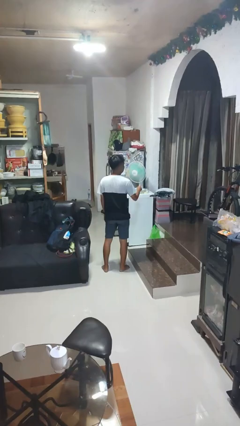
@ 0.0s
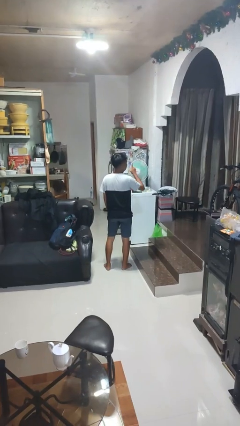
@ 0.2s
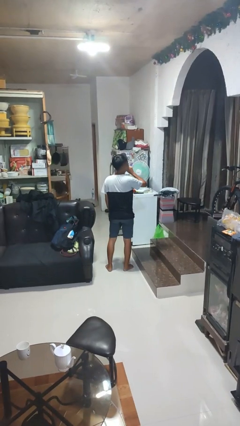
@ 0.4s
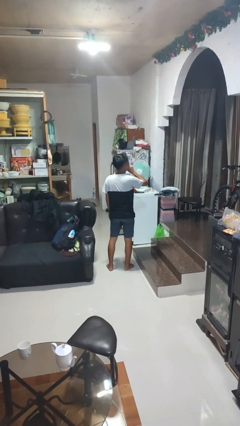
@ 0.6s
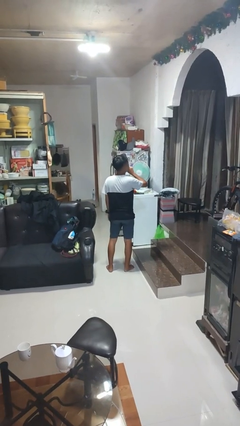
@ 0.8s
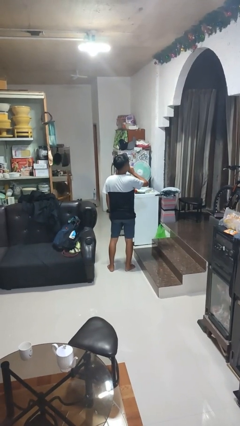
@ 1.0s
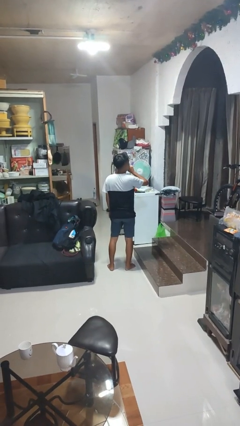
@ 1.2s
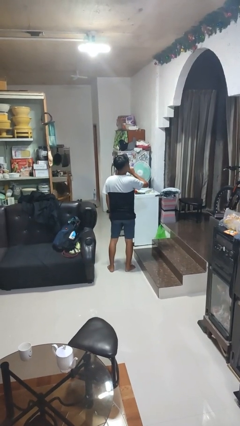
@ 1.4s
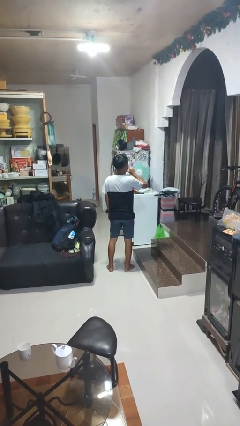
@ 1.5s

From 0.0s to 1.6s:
person gestures be quiet

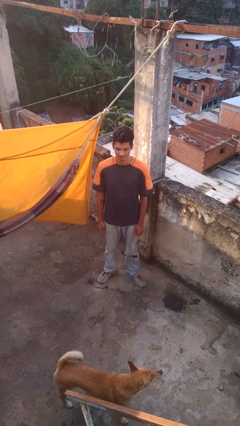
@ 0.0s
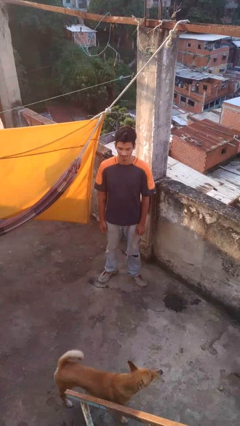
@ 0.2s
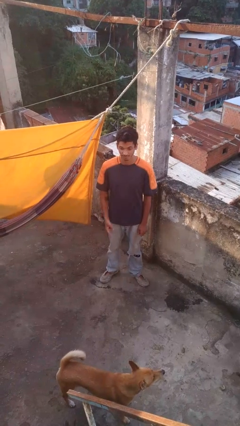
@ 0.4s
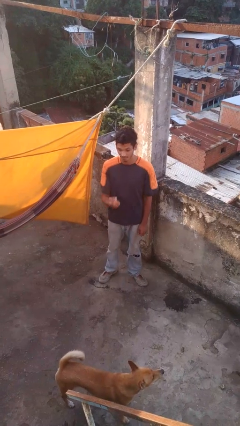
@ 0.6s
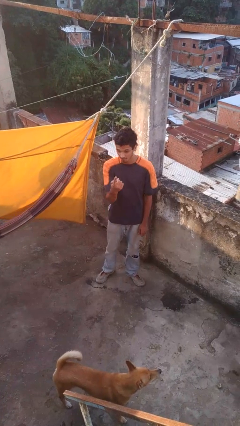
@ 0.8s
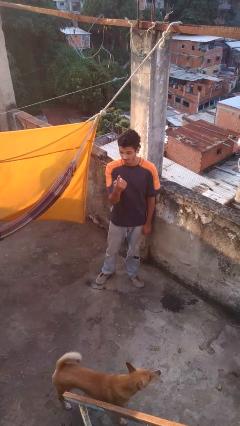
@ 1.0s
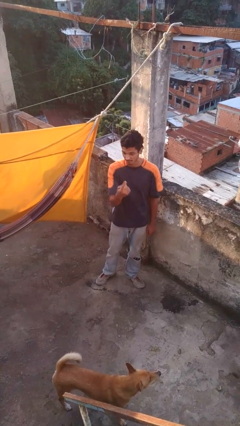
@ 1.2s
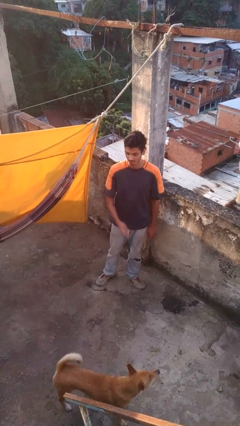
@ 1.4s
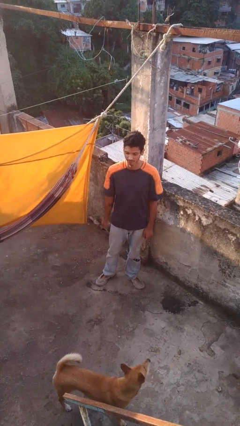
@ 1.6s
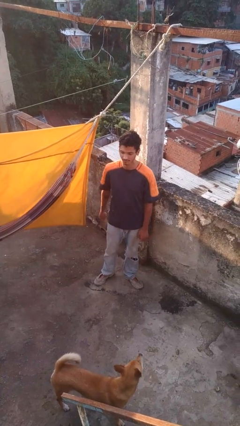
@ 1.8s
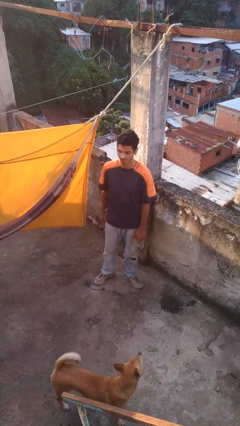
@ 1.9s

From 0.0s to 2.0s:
person gestures number one

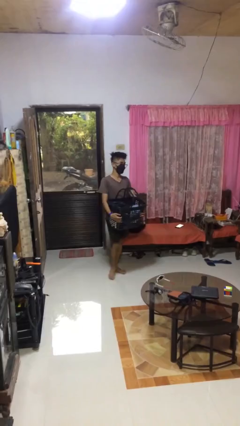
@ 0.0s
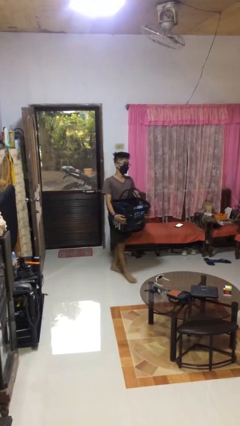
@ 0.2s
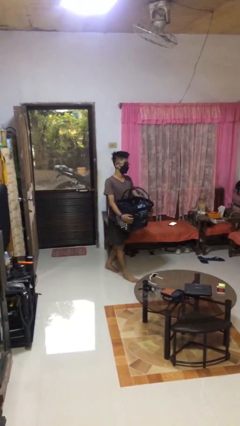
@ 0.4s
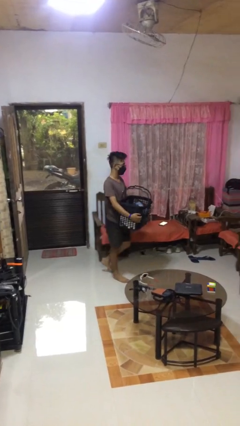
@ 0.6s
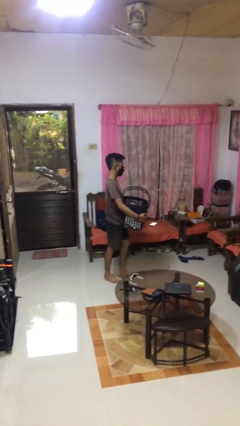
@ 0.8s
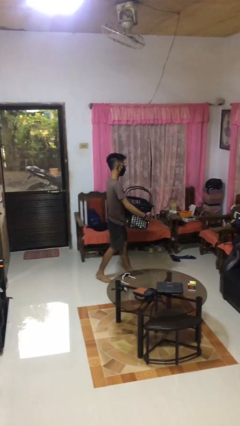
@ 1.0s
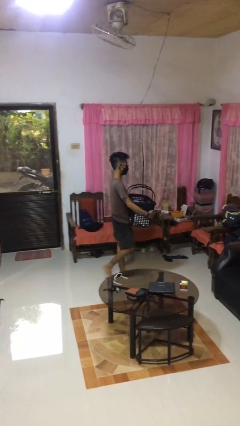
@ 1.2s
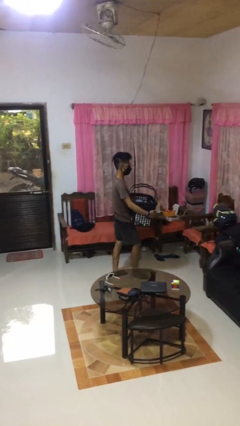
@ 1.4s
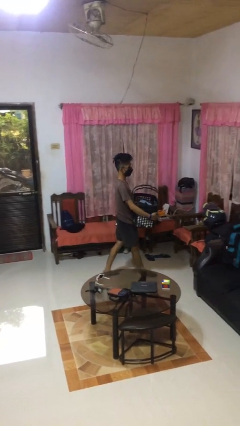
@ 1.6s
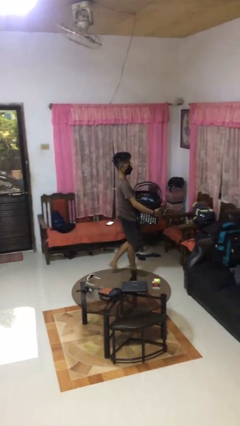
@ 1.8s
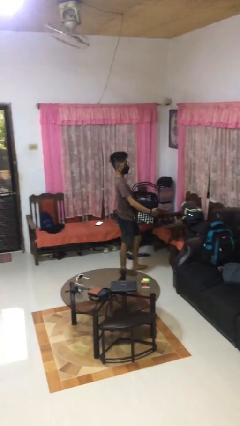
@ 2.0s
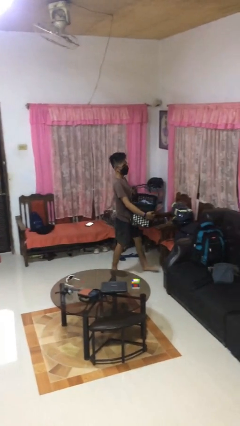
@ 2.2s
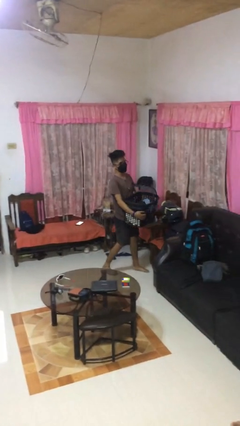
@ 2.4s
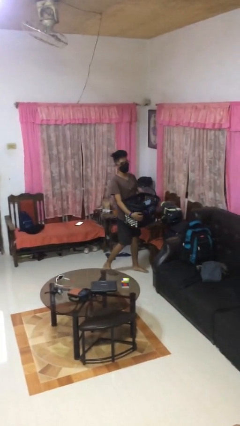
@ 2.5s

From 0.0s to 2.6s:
person carries laundry basket

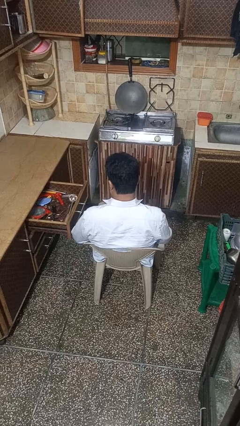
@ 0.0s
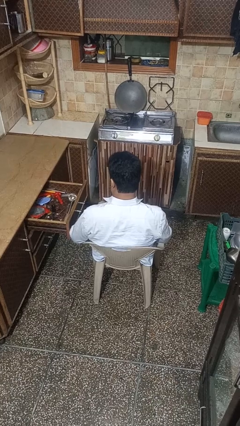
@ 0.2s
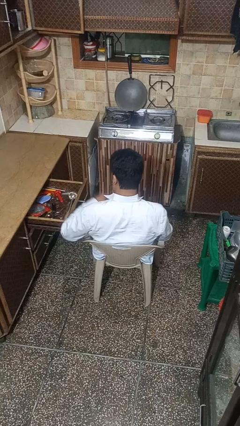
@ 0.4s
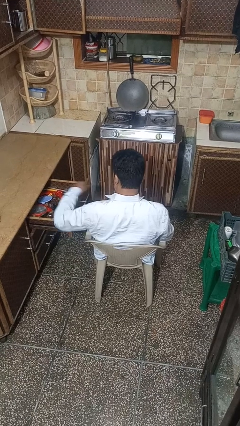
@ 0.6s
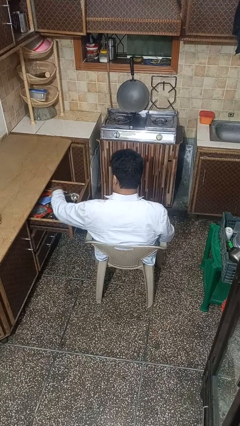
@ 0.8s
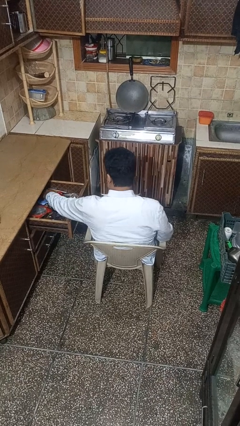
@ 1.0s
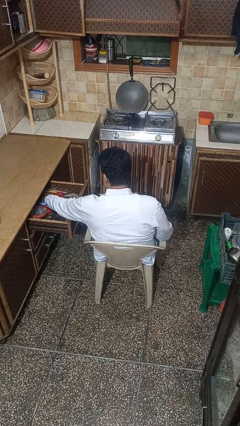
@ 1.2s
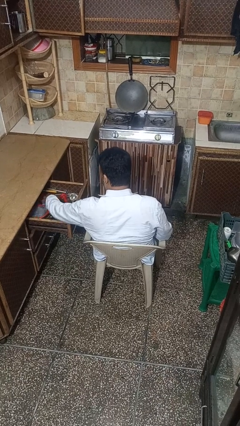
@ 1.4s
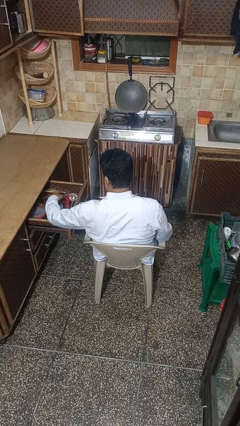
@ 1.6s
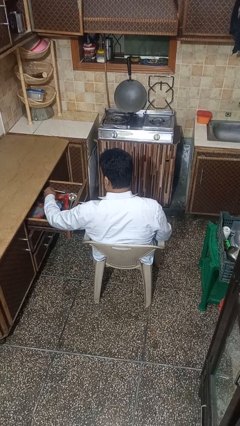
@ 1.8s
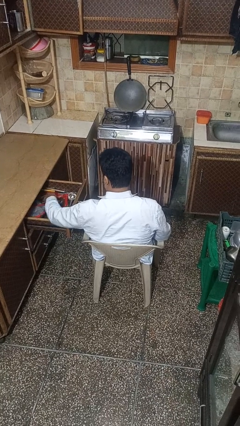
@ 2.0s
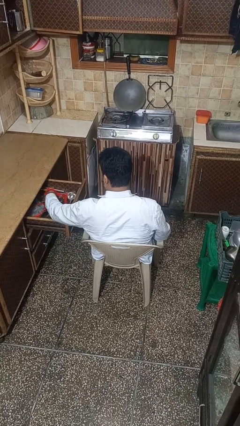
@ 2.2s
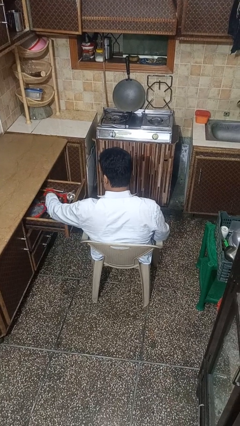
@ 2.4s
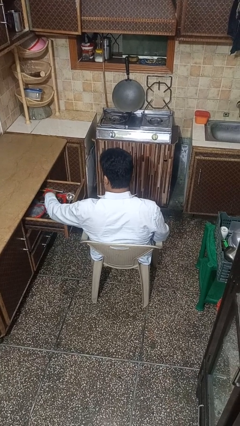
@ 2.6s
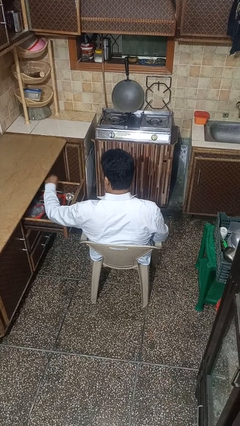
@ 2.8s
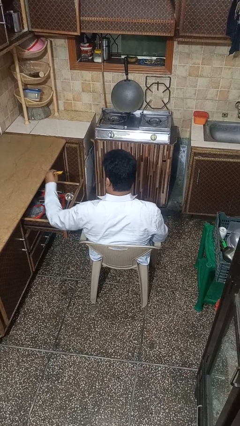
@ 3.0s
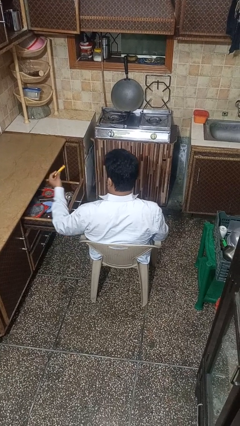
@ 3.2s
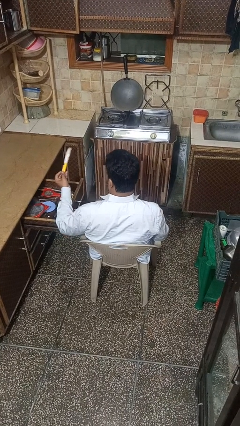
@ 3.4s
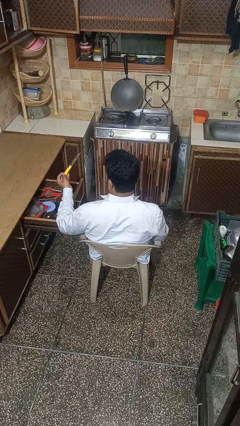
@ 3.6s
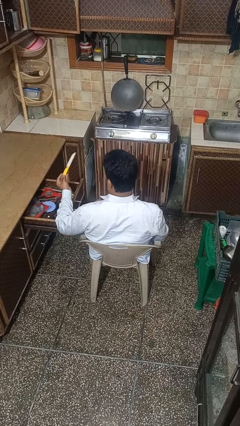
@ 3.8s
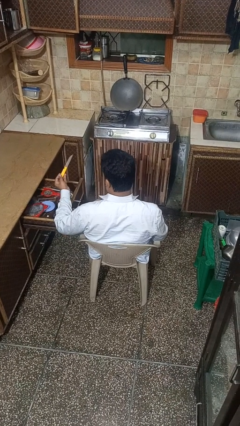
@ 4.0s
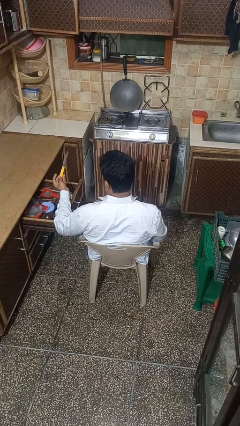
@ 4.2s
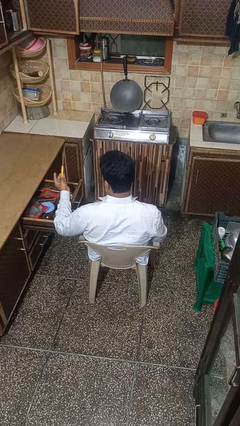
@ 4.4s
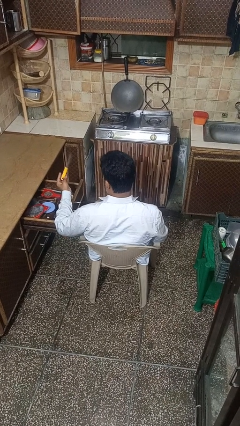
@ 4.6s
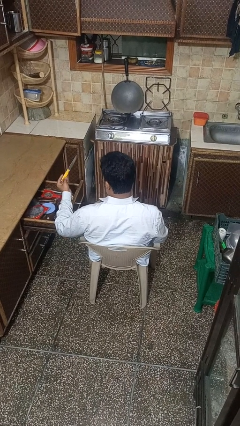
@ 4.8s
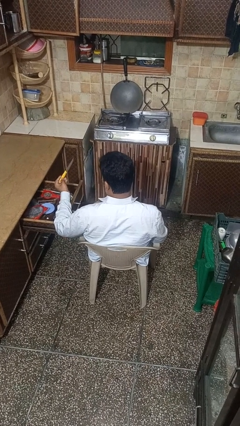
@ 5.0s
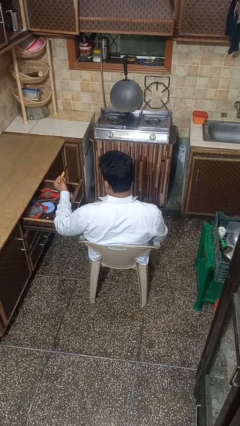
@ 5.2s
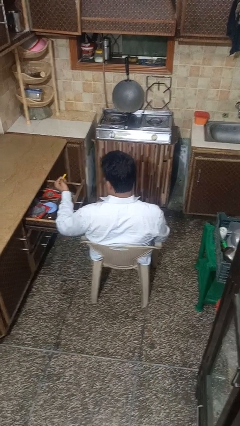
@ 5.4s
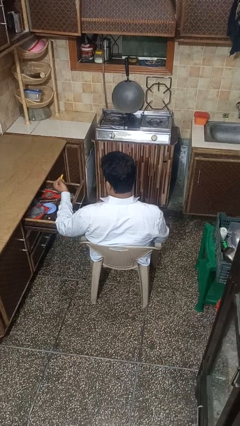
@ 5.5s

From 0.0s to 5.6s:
person takes object from kitchen drawer

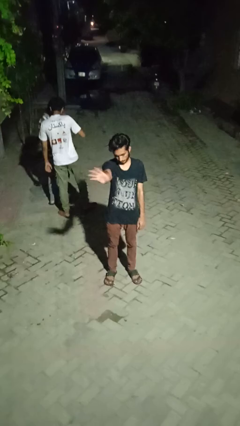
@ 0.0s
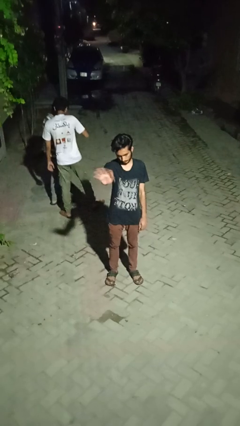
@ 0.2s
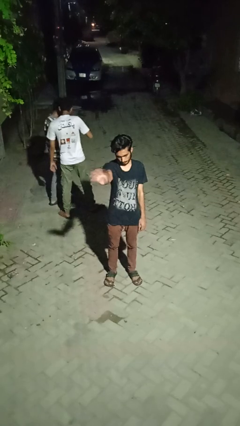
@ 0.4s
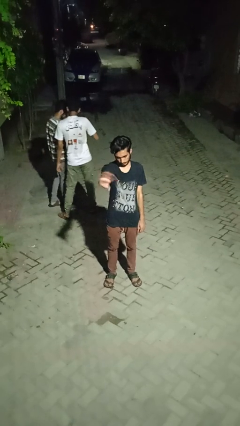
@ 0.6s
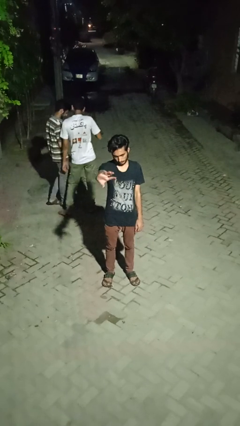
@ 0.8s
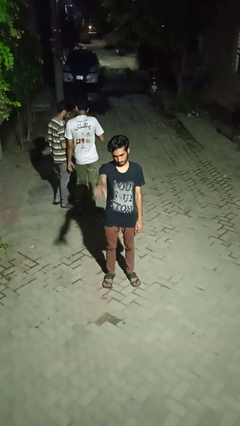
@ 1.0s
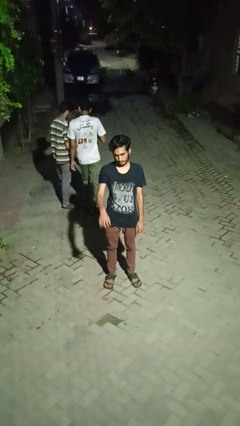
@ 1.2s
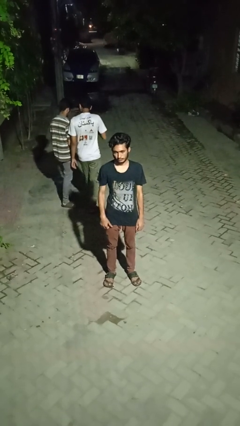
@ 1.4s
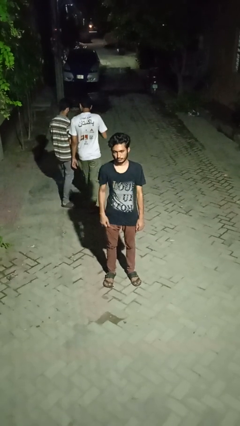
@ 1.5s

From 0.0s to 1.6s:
person waves at person

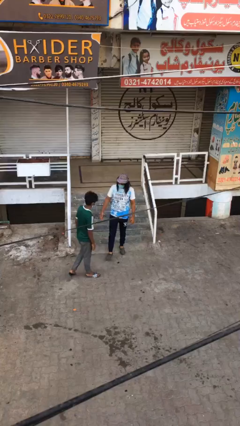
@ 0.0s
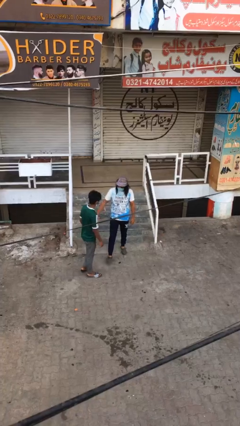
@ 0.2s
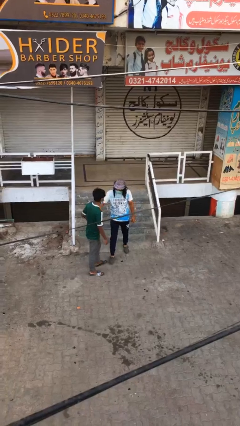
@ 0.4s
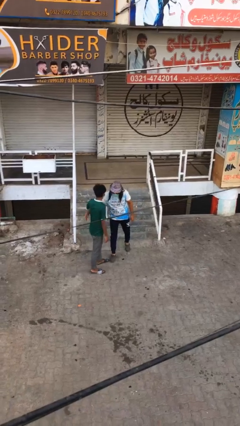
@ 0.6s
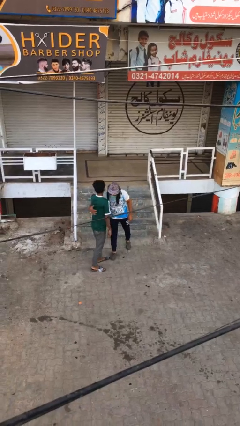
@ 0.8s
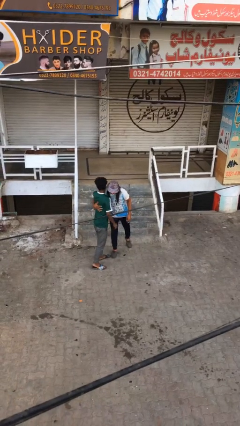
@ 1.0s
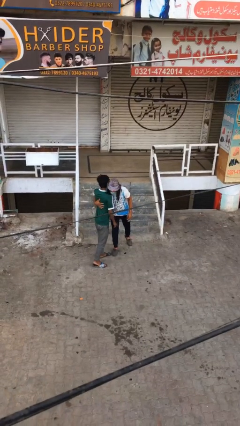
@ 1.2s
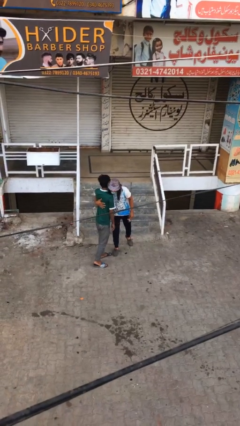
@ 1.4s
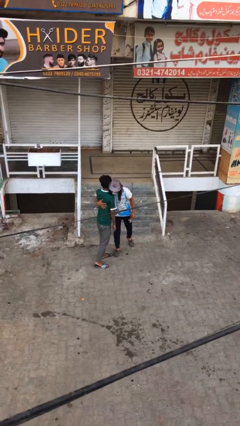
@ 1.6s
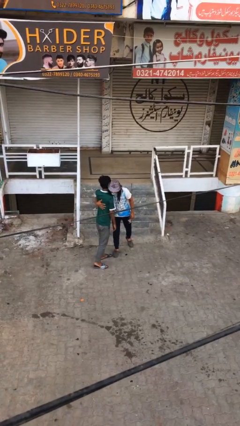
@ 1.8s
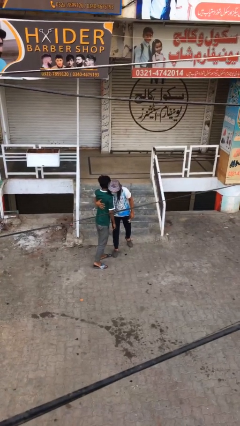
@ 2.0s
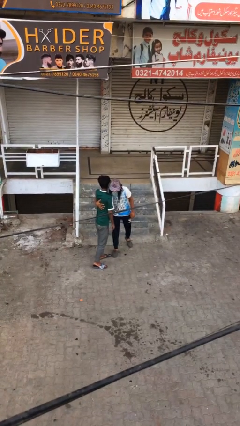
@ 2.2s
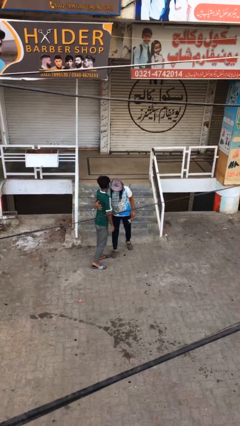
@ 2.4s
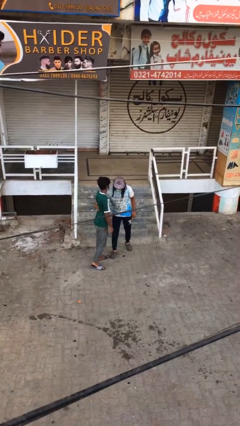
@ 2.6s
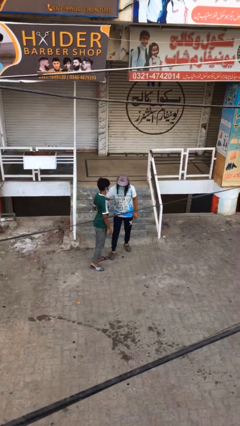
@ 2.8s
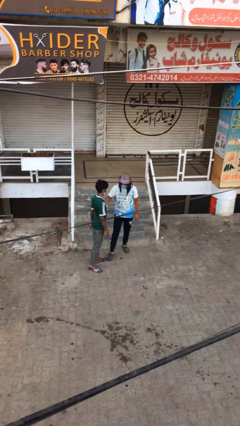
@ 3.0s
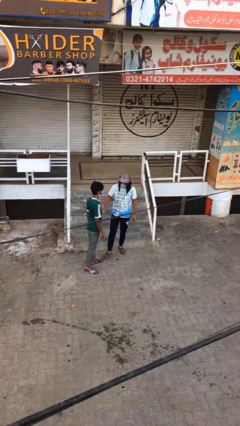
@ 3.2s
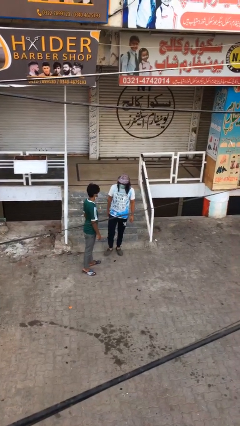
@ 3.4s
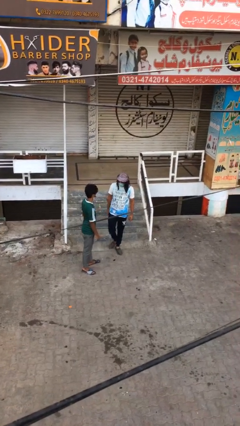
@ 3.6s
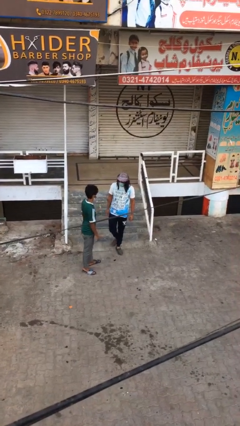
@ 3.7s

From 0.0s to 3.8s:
person embraces person
